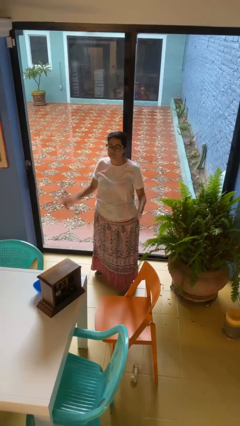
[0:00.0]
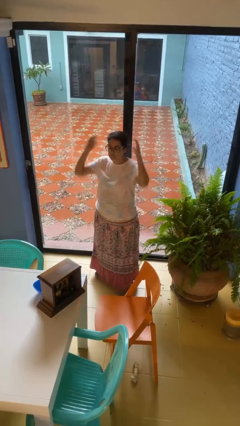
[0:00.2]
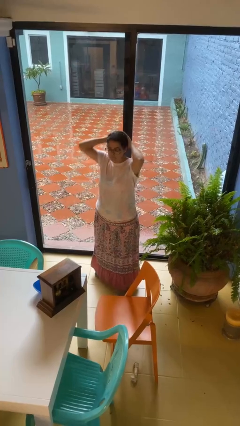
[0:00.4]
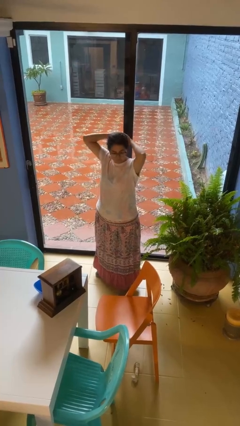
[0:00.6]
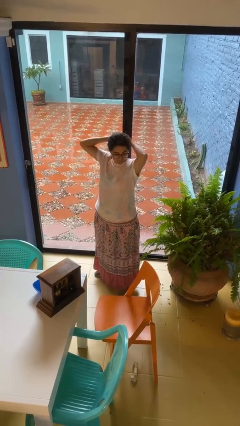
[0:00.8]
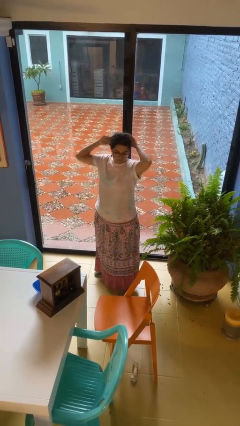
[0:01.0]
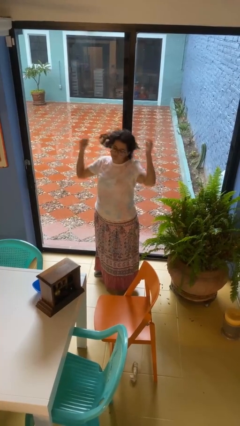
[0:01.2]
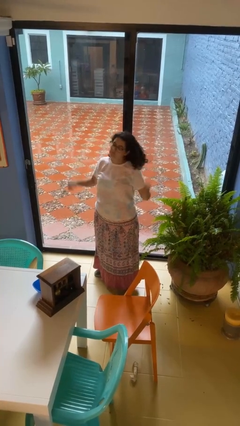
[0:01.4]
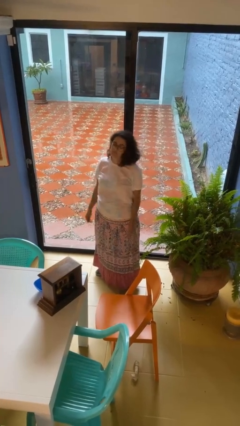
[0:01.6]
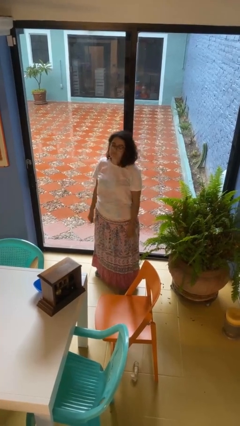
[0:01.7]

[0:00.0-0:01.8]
person takes off hairtie

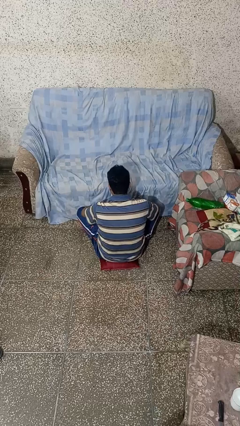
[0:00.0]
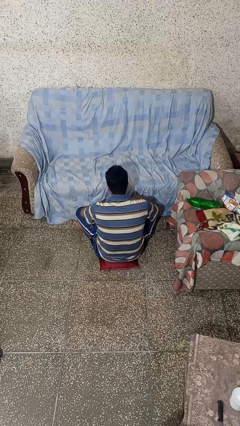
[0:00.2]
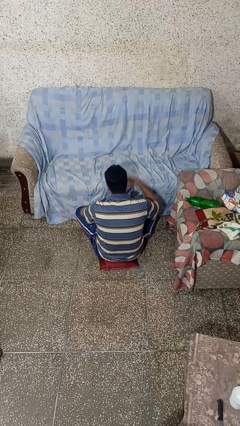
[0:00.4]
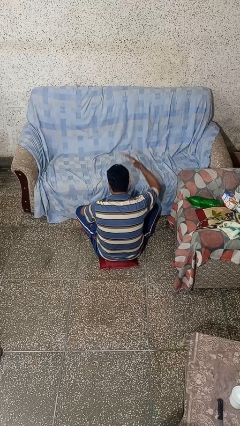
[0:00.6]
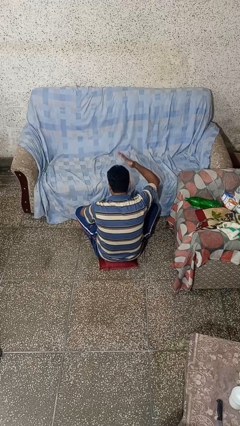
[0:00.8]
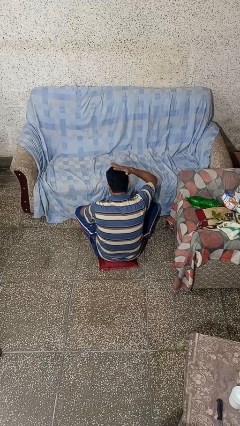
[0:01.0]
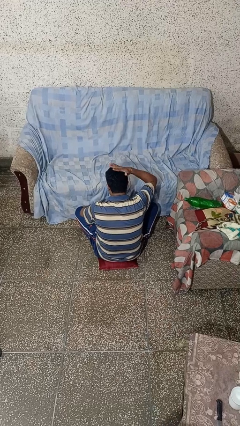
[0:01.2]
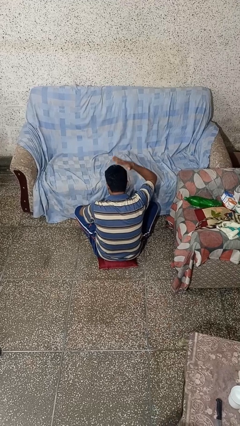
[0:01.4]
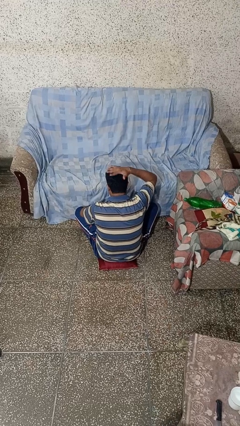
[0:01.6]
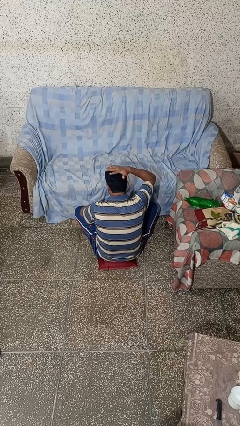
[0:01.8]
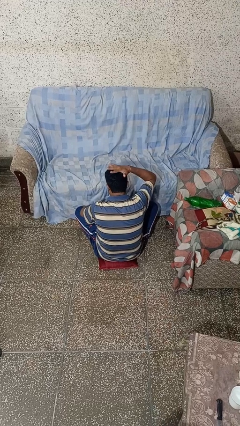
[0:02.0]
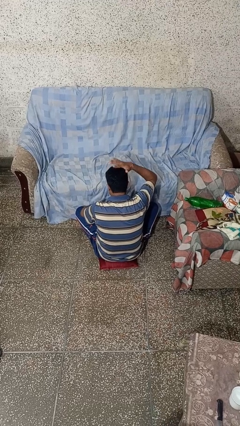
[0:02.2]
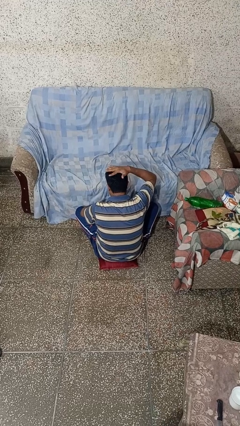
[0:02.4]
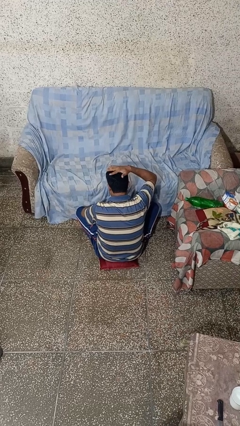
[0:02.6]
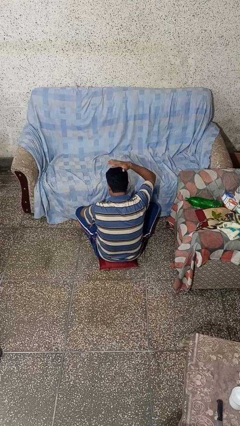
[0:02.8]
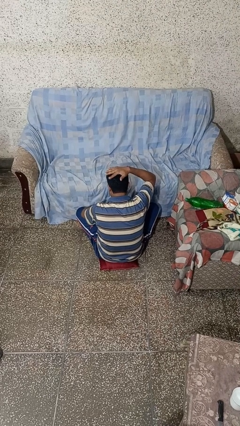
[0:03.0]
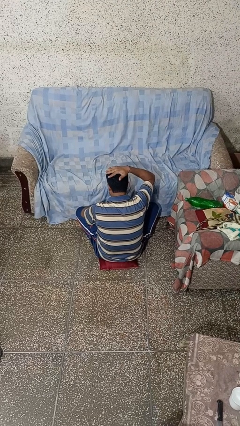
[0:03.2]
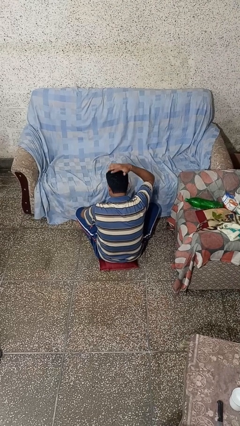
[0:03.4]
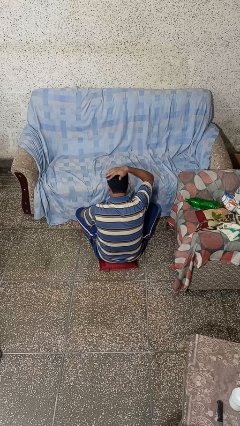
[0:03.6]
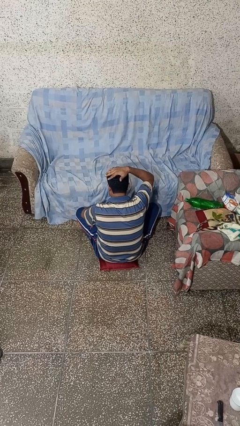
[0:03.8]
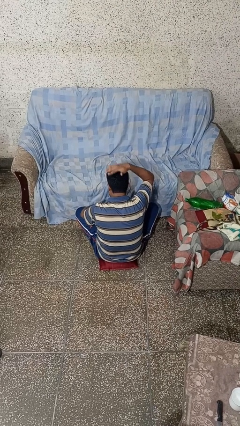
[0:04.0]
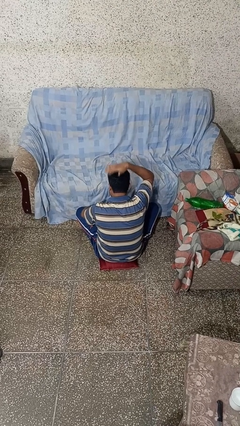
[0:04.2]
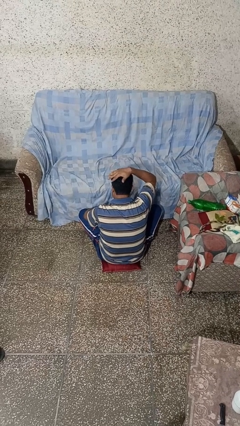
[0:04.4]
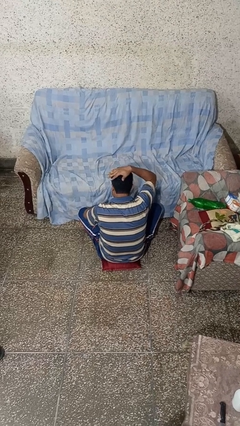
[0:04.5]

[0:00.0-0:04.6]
person pats head

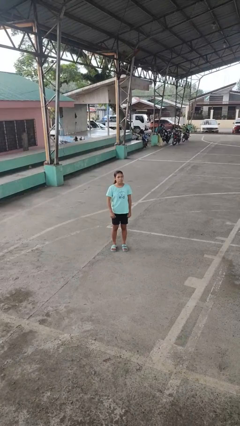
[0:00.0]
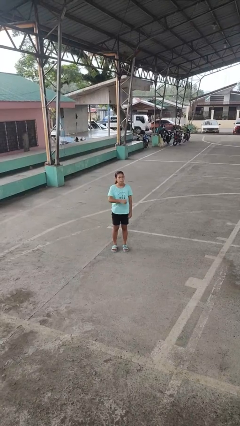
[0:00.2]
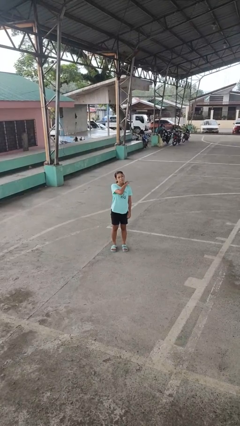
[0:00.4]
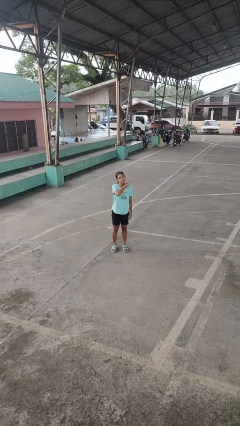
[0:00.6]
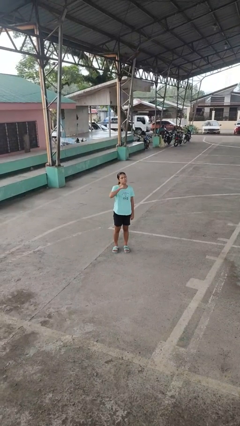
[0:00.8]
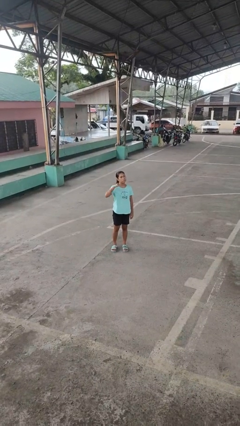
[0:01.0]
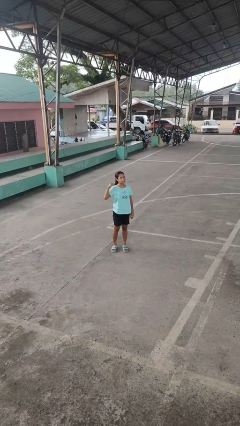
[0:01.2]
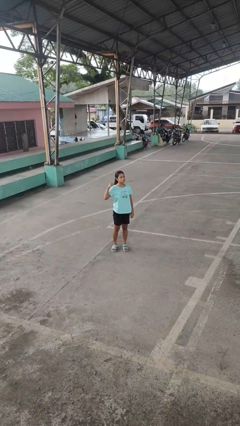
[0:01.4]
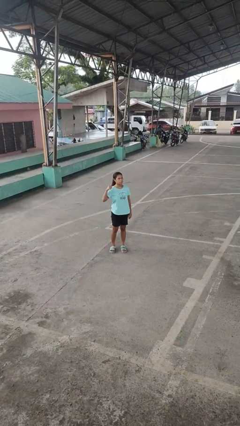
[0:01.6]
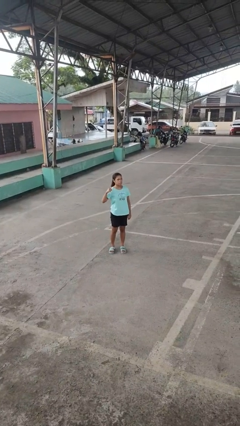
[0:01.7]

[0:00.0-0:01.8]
person gestures cut

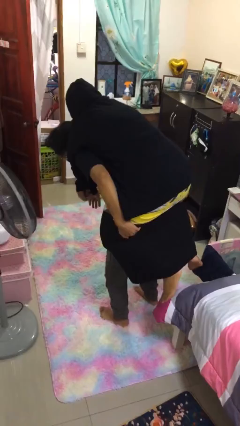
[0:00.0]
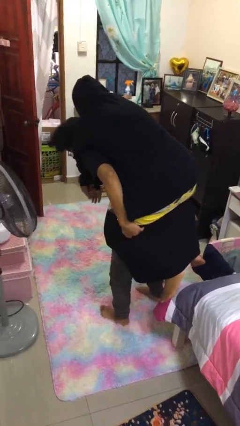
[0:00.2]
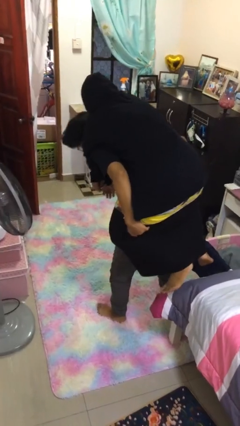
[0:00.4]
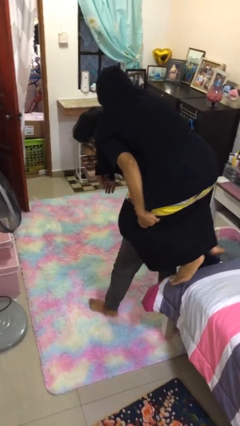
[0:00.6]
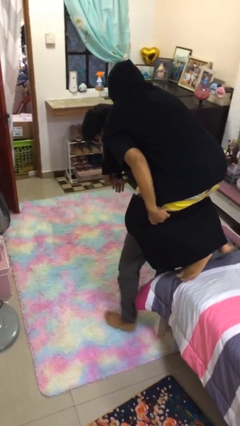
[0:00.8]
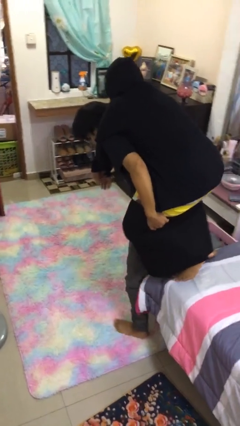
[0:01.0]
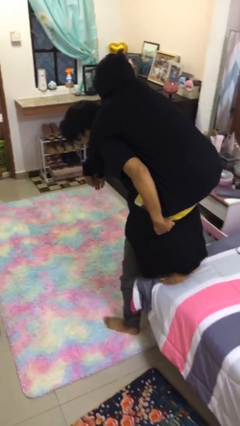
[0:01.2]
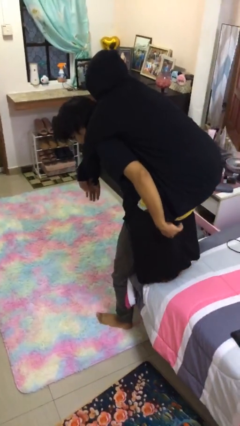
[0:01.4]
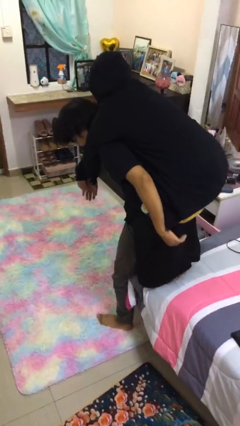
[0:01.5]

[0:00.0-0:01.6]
person puts down person

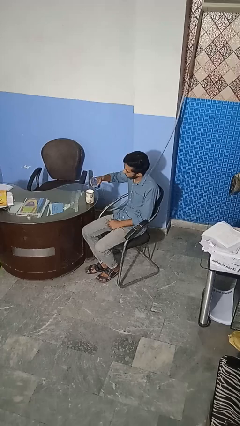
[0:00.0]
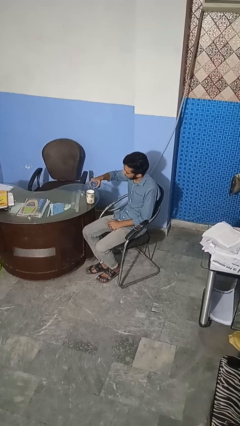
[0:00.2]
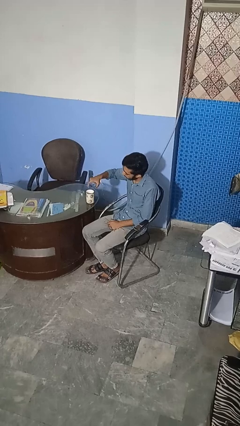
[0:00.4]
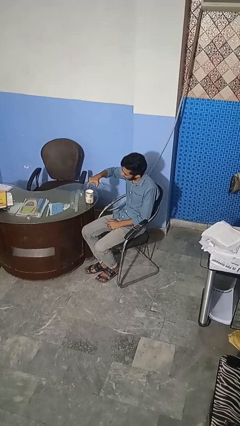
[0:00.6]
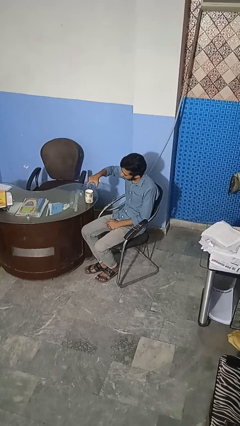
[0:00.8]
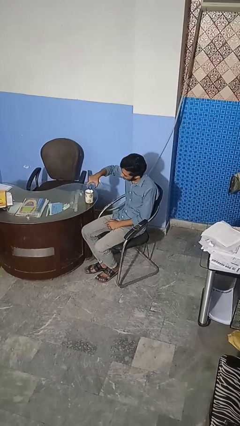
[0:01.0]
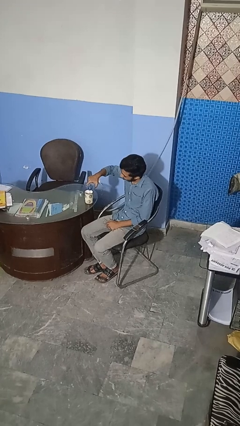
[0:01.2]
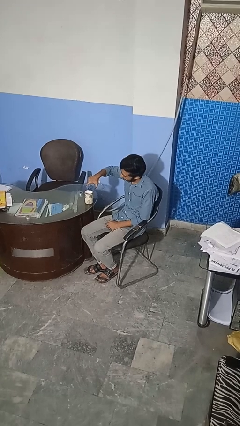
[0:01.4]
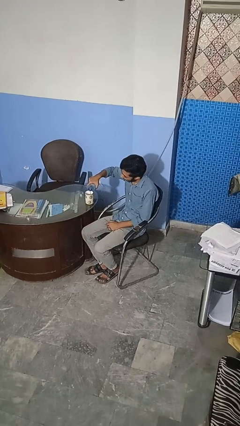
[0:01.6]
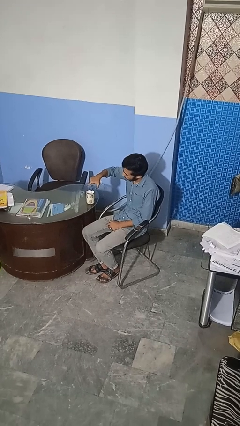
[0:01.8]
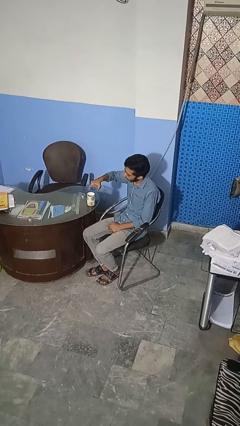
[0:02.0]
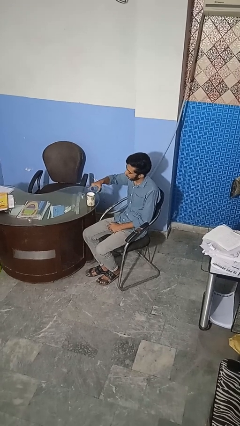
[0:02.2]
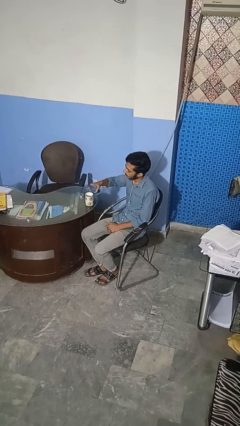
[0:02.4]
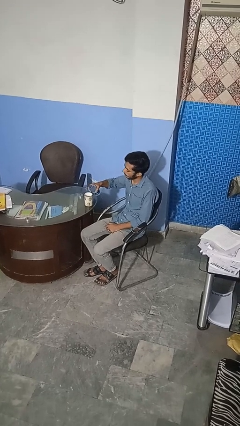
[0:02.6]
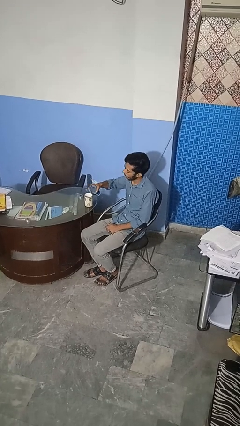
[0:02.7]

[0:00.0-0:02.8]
person pours liquid into cup

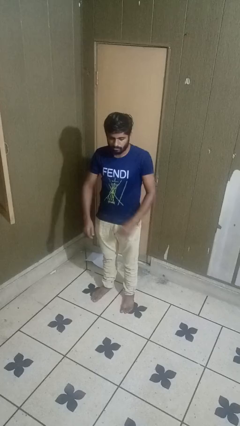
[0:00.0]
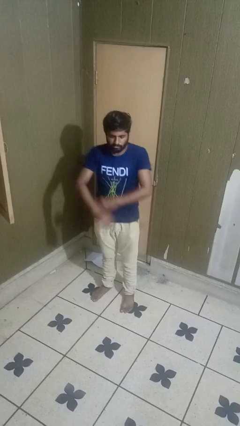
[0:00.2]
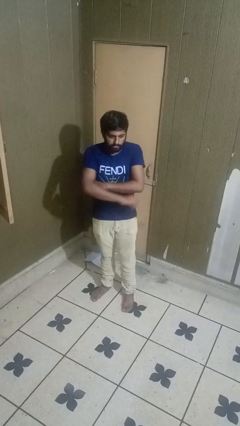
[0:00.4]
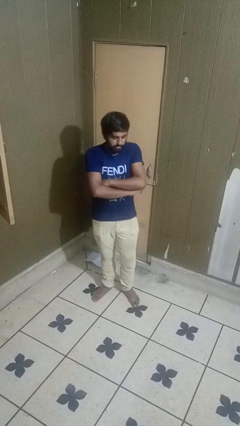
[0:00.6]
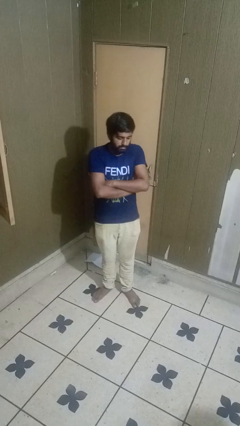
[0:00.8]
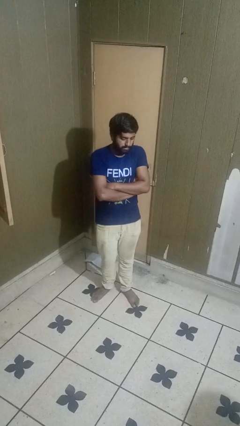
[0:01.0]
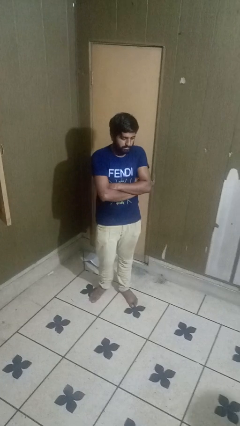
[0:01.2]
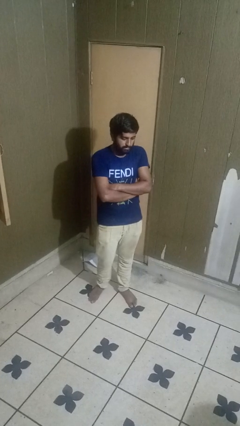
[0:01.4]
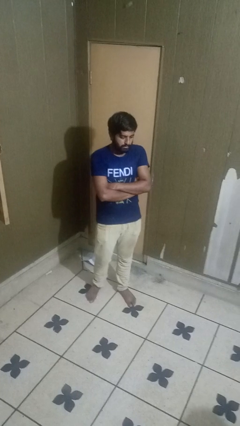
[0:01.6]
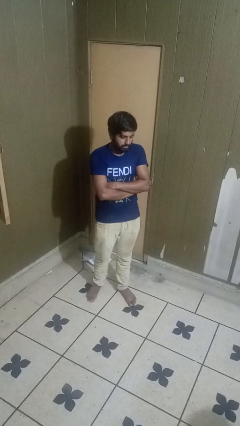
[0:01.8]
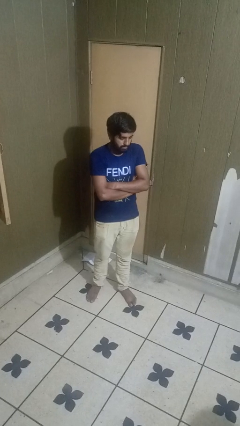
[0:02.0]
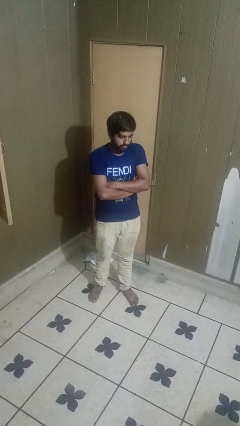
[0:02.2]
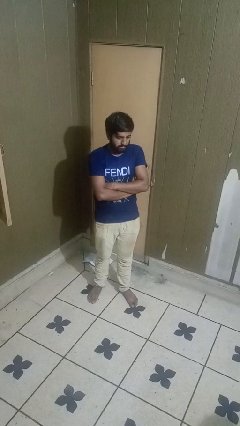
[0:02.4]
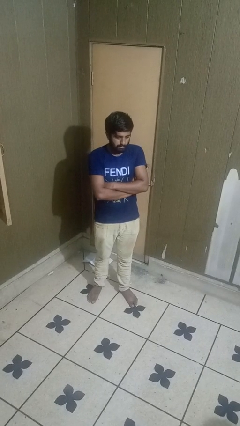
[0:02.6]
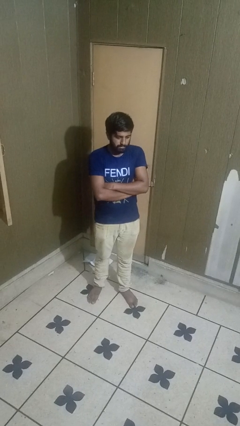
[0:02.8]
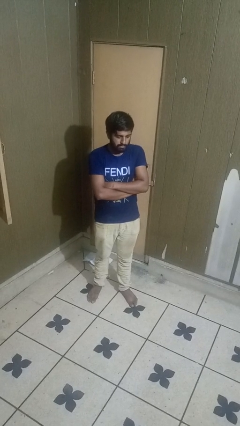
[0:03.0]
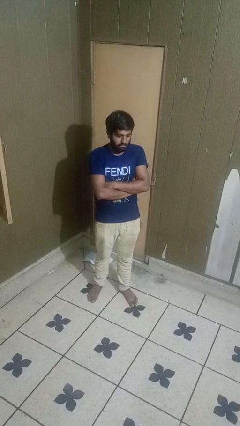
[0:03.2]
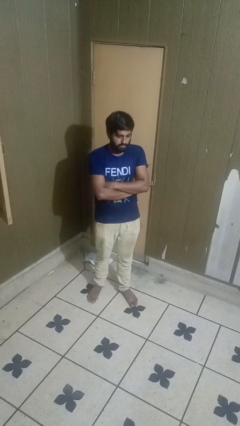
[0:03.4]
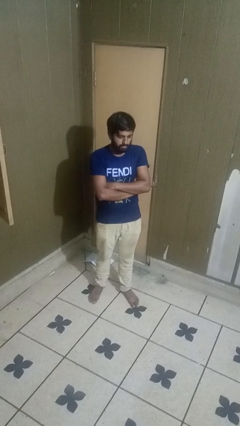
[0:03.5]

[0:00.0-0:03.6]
person crosses arms

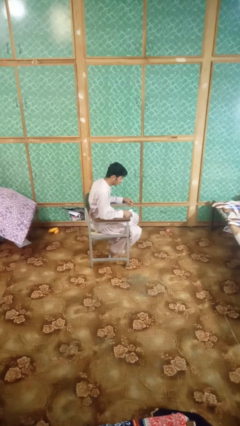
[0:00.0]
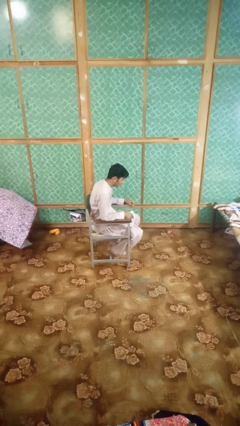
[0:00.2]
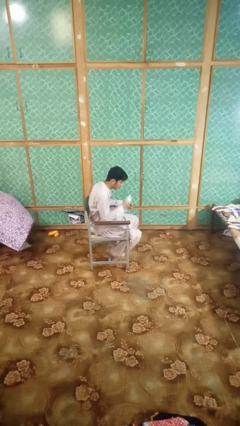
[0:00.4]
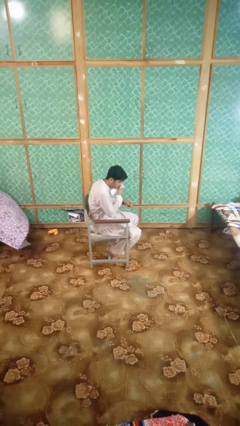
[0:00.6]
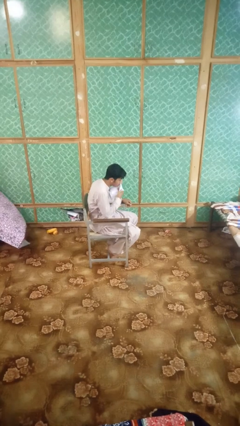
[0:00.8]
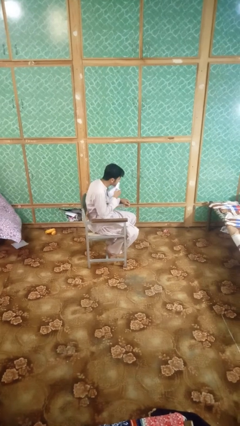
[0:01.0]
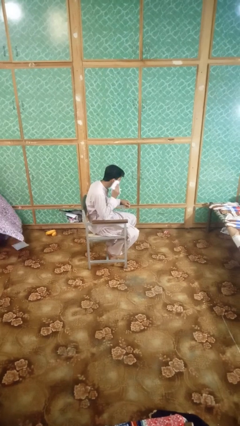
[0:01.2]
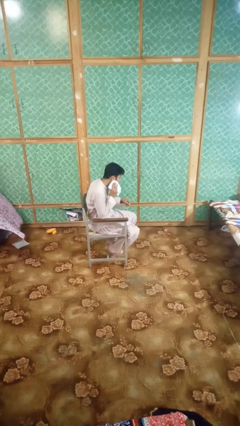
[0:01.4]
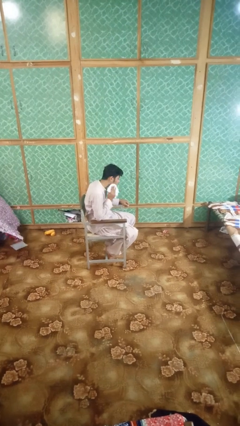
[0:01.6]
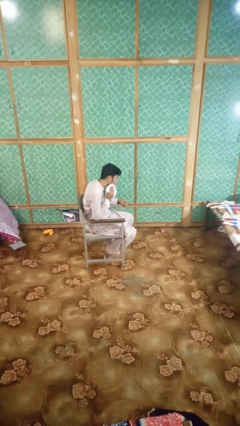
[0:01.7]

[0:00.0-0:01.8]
person wipes mouth with napkin
